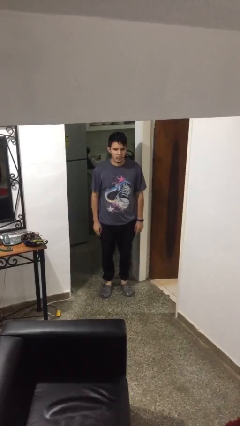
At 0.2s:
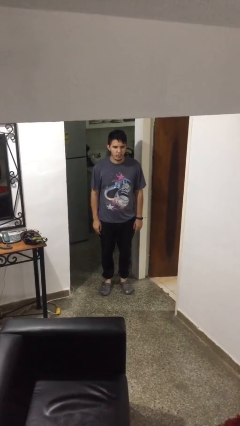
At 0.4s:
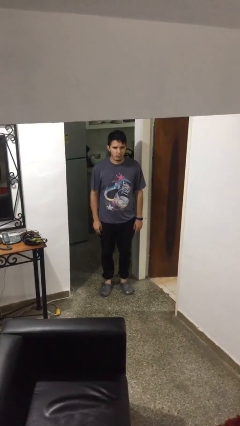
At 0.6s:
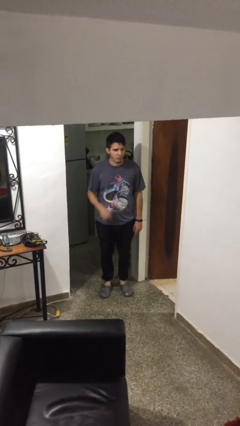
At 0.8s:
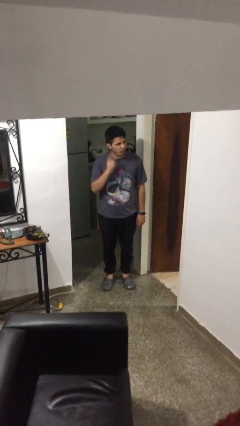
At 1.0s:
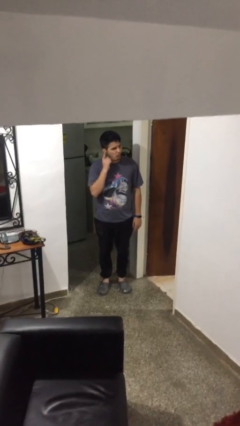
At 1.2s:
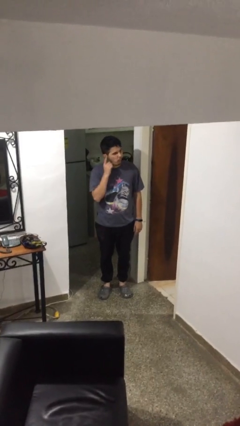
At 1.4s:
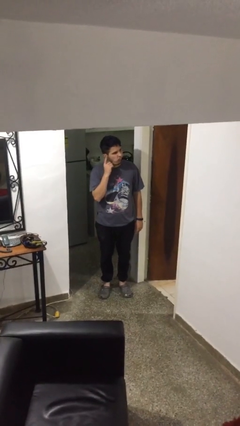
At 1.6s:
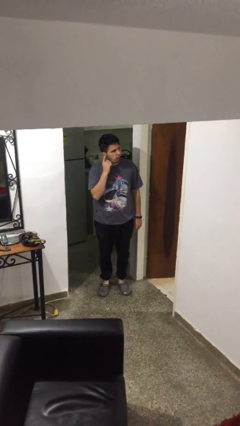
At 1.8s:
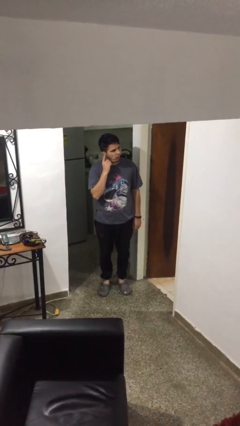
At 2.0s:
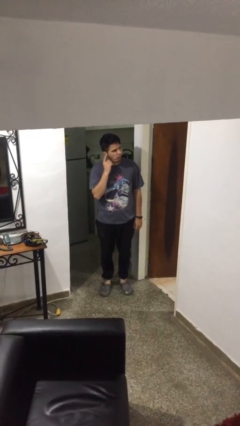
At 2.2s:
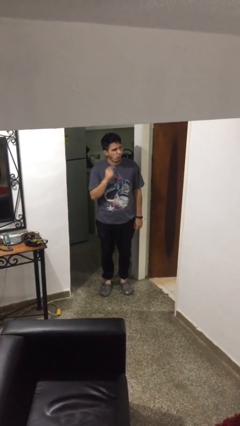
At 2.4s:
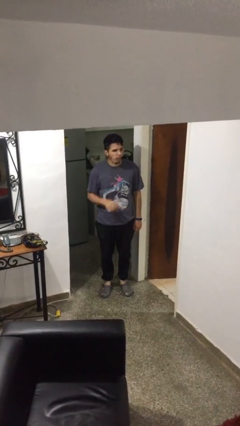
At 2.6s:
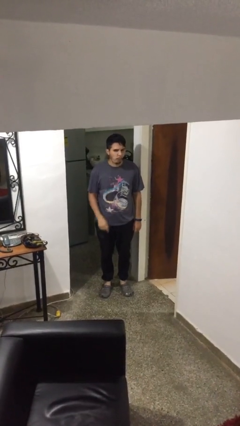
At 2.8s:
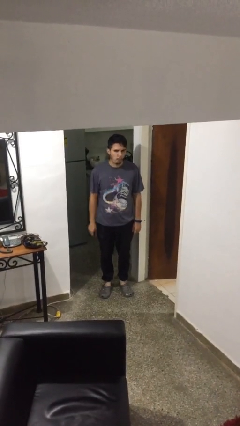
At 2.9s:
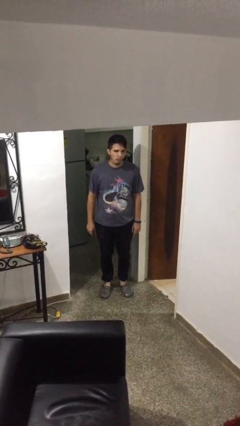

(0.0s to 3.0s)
person gestures listen closely

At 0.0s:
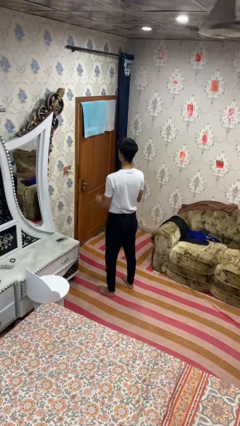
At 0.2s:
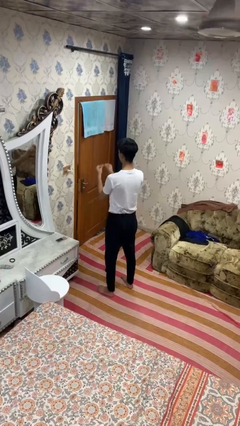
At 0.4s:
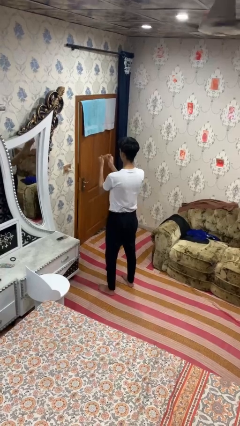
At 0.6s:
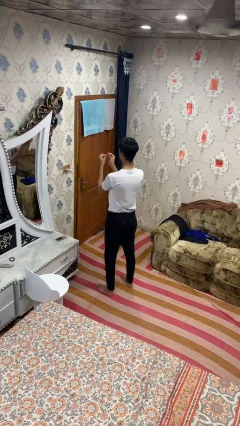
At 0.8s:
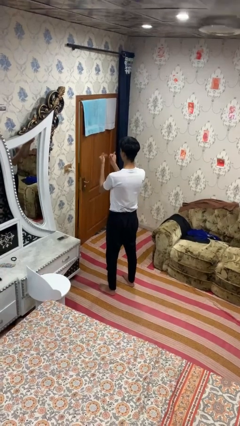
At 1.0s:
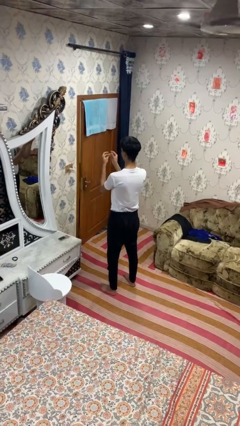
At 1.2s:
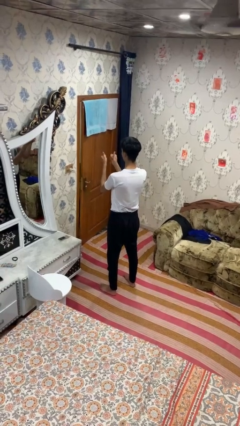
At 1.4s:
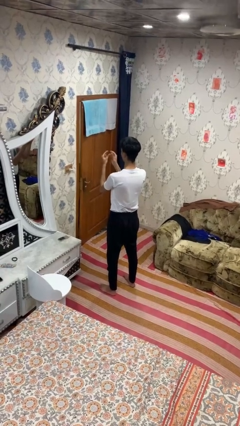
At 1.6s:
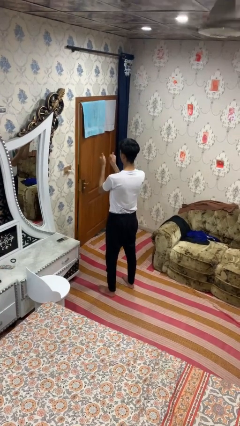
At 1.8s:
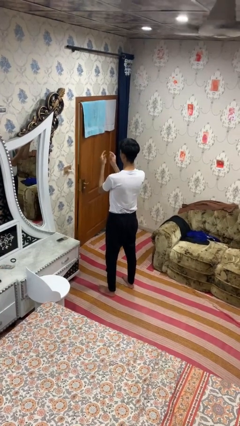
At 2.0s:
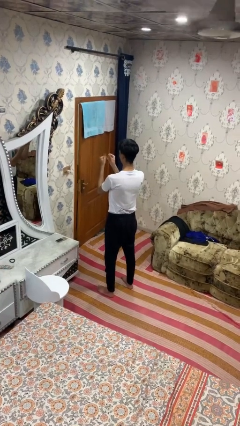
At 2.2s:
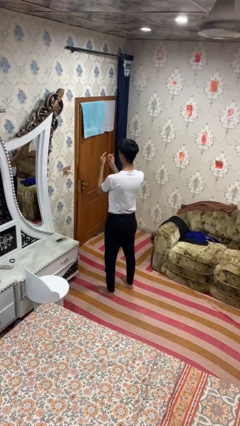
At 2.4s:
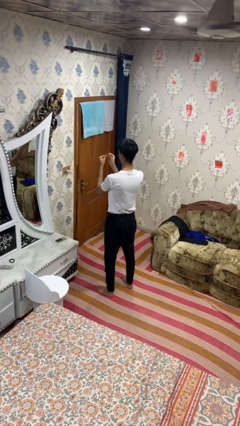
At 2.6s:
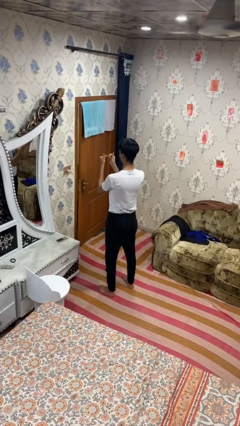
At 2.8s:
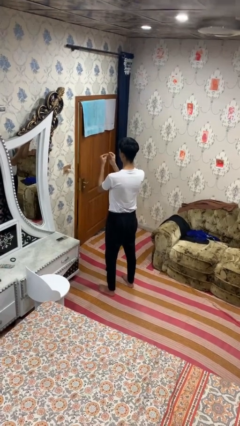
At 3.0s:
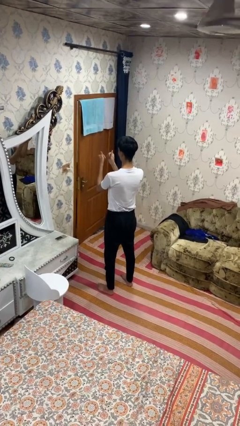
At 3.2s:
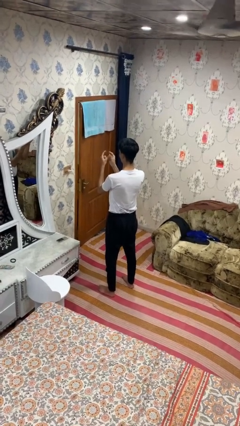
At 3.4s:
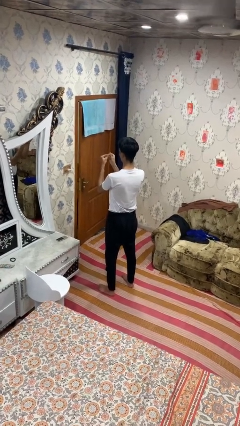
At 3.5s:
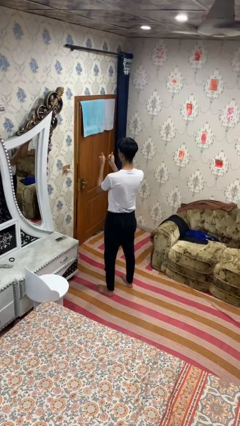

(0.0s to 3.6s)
person snaps fingers

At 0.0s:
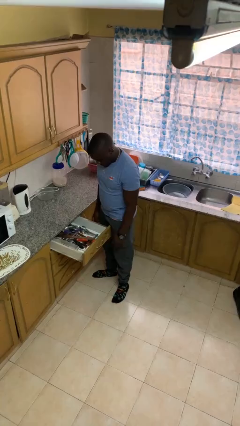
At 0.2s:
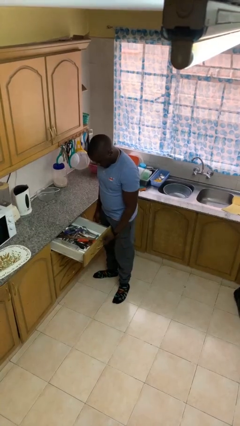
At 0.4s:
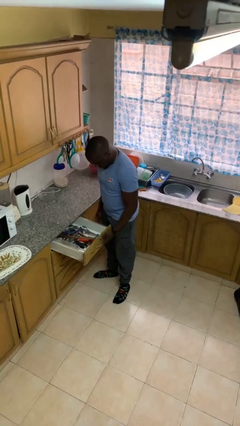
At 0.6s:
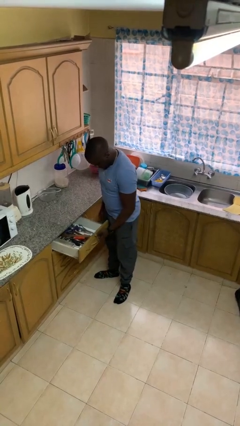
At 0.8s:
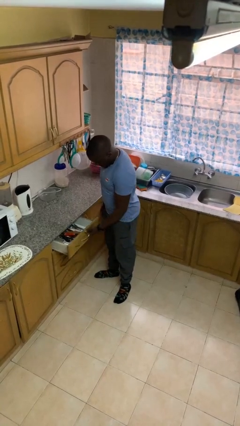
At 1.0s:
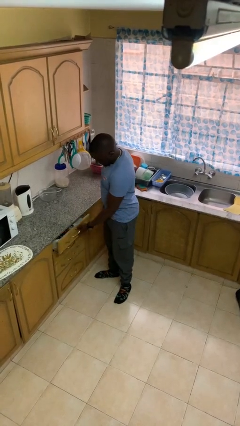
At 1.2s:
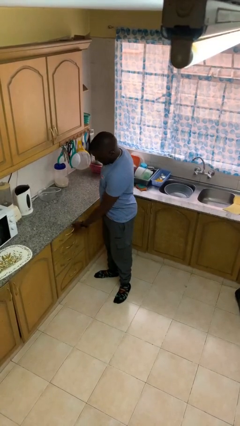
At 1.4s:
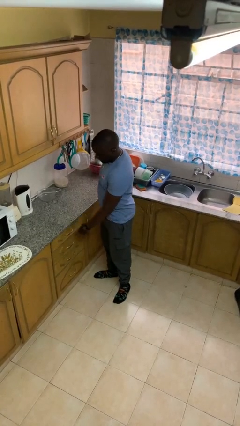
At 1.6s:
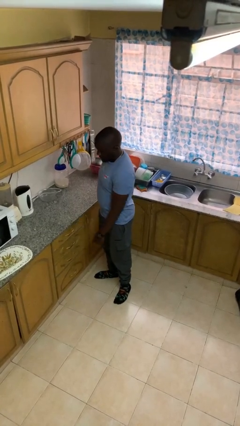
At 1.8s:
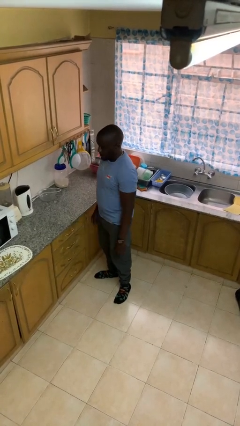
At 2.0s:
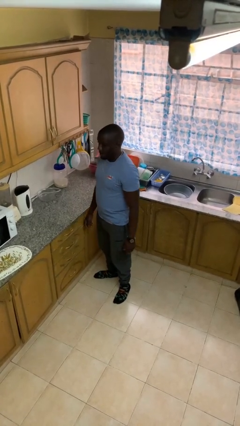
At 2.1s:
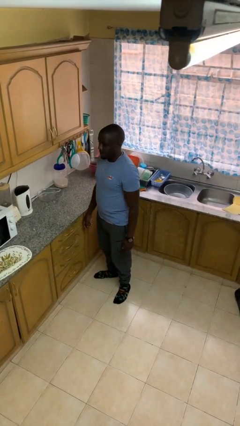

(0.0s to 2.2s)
person closes kitchen drawer

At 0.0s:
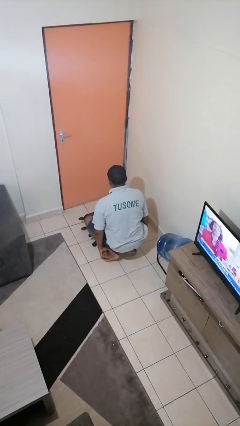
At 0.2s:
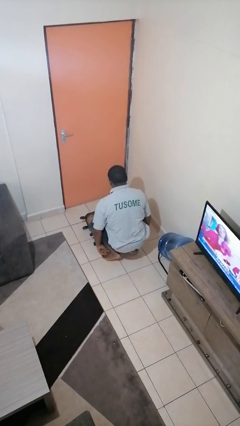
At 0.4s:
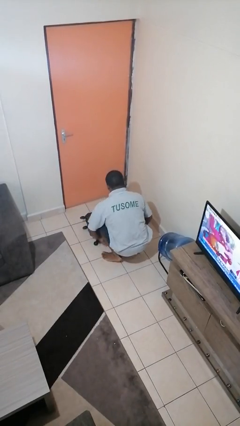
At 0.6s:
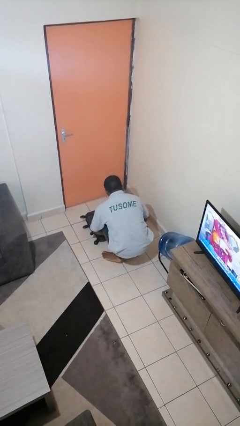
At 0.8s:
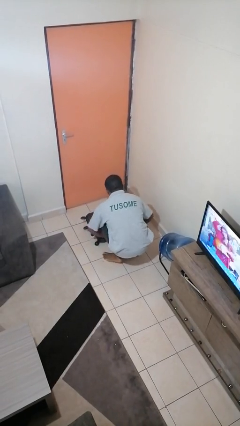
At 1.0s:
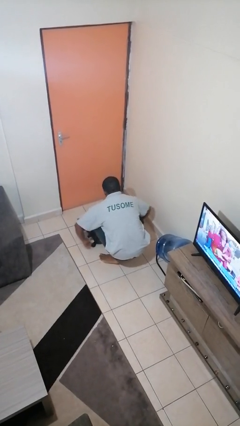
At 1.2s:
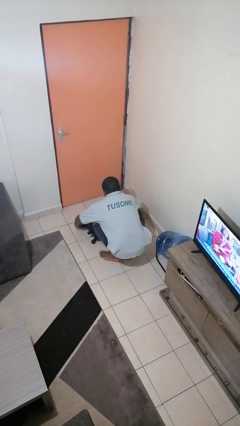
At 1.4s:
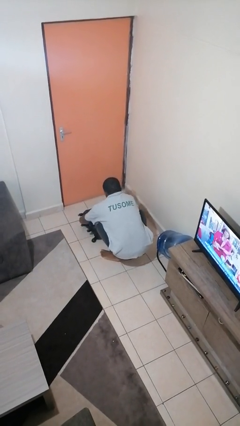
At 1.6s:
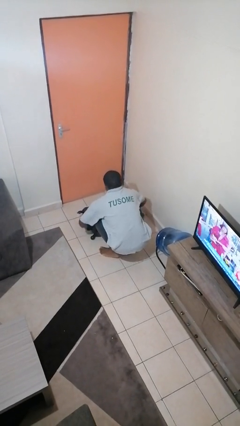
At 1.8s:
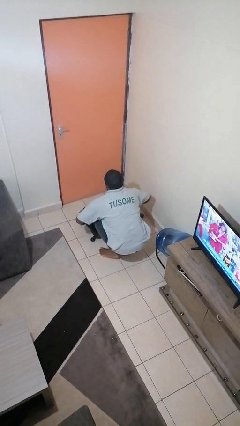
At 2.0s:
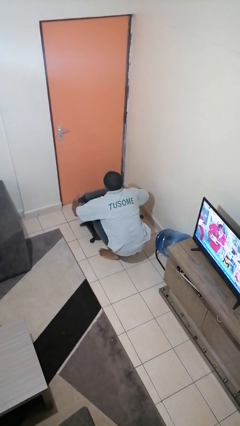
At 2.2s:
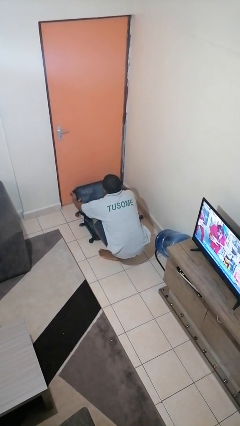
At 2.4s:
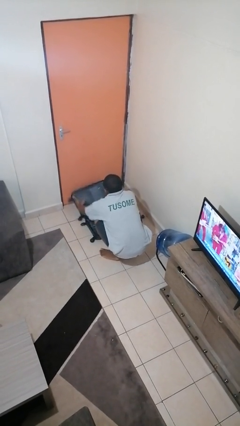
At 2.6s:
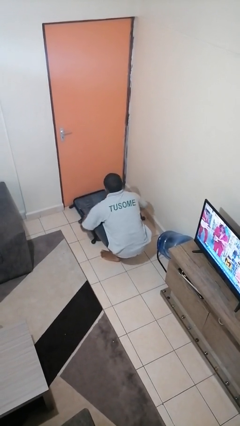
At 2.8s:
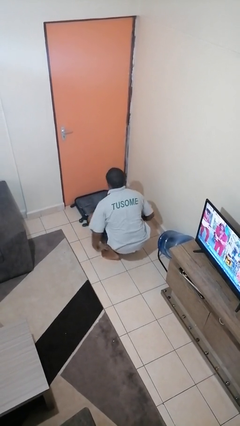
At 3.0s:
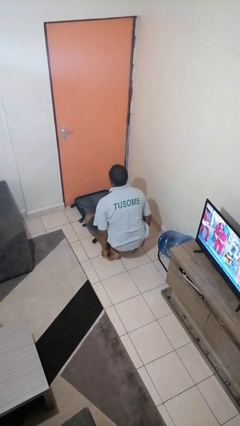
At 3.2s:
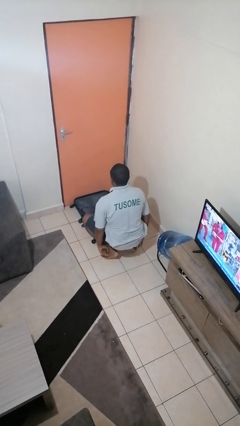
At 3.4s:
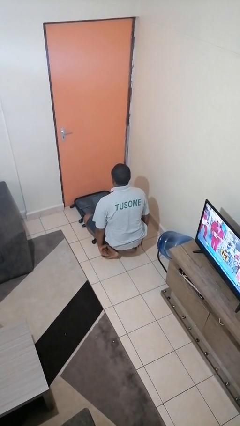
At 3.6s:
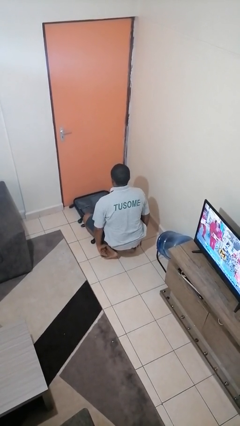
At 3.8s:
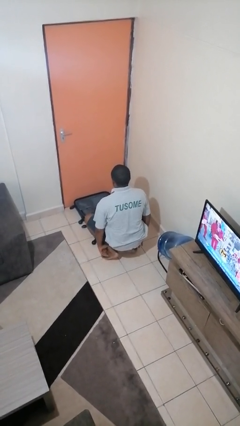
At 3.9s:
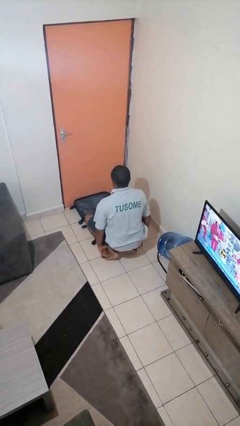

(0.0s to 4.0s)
person opens suitcase

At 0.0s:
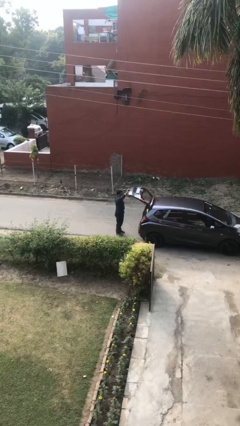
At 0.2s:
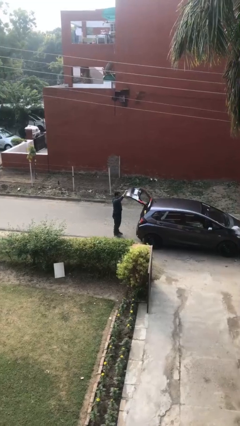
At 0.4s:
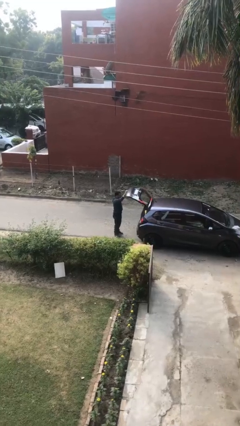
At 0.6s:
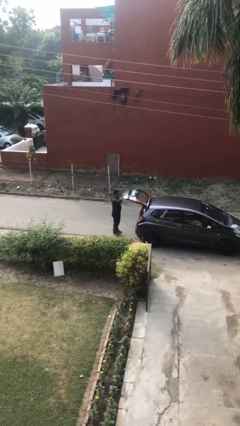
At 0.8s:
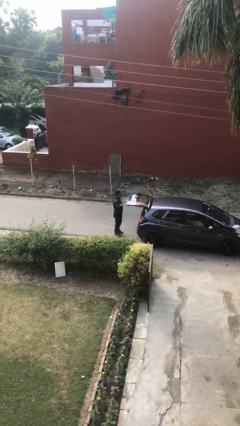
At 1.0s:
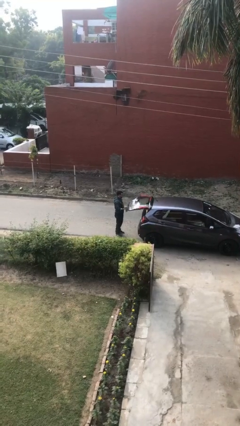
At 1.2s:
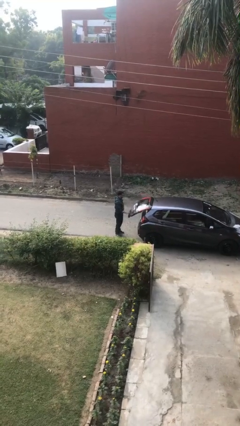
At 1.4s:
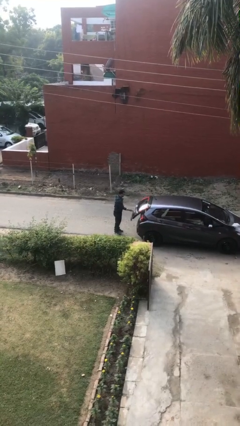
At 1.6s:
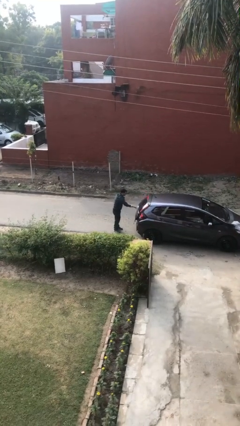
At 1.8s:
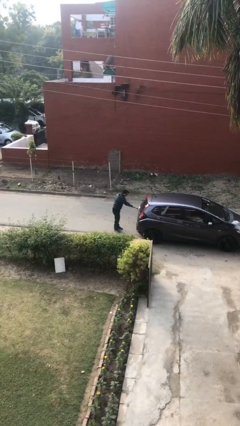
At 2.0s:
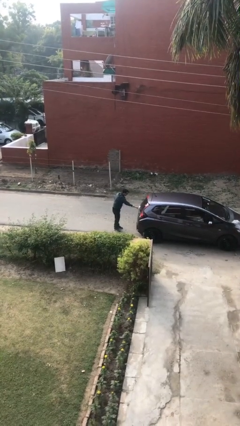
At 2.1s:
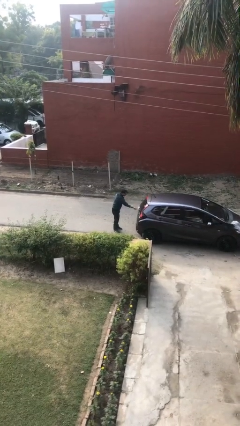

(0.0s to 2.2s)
person closes car trunk

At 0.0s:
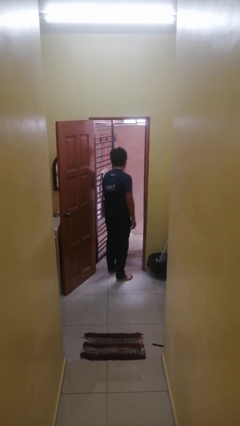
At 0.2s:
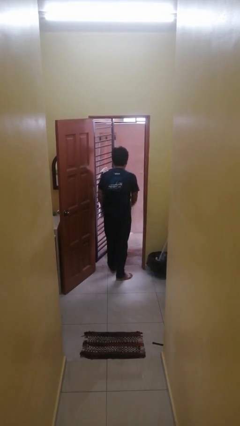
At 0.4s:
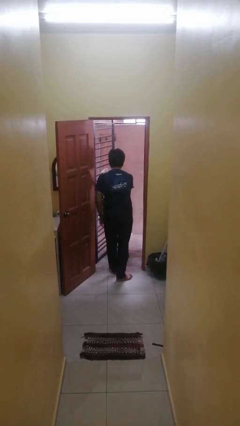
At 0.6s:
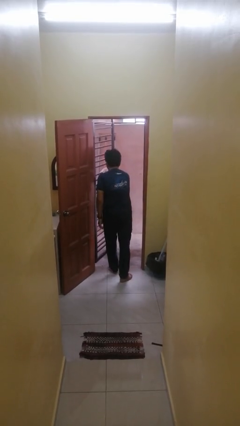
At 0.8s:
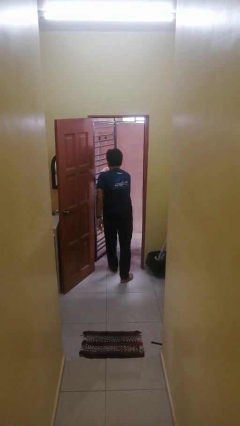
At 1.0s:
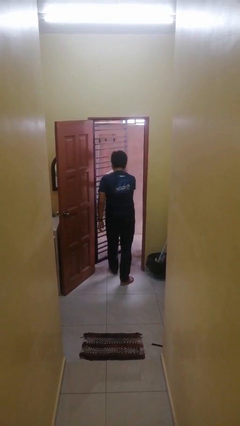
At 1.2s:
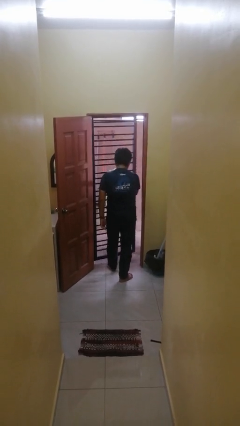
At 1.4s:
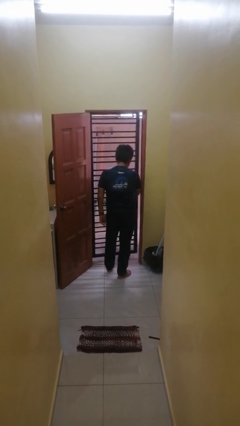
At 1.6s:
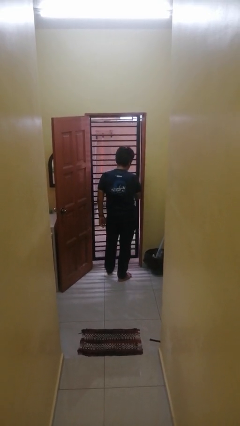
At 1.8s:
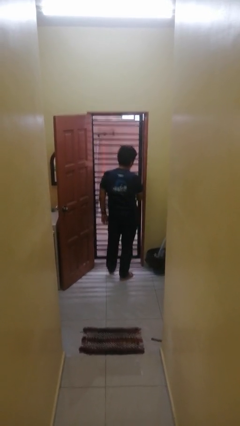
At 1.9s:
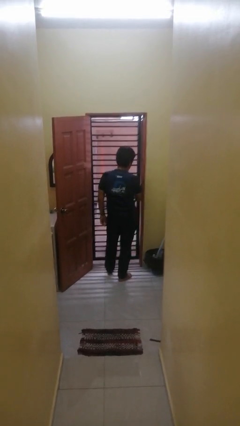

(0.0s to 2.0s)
person closes gate

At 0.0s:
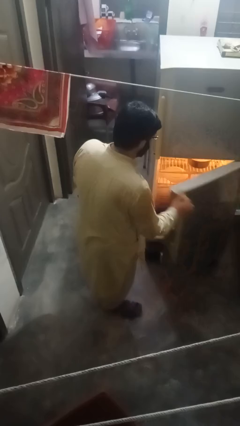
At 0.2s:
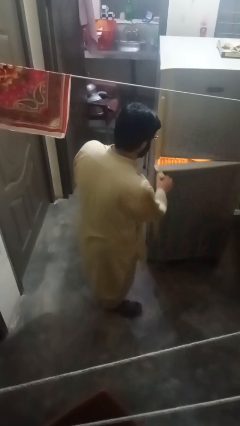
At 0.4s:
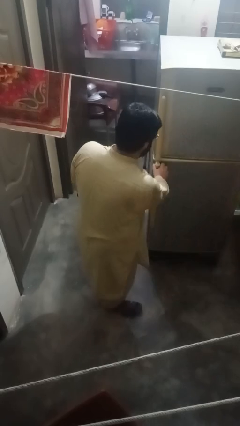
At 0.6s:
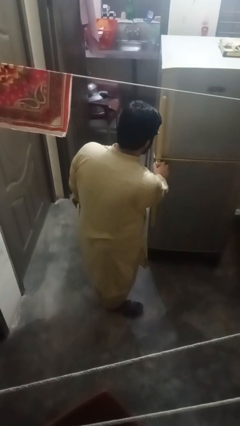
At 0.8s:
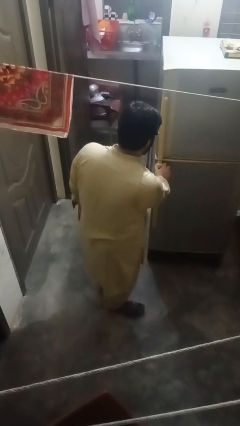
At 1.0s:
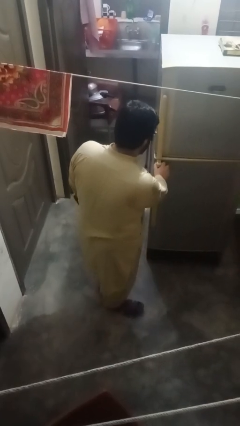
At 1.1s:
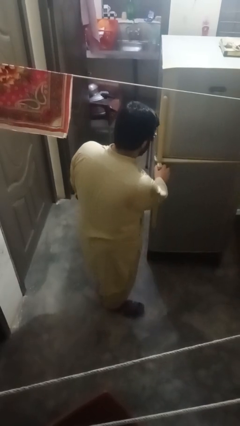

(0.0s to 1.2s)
person closes refrigerator
